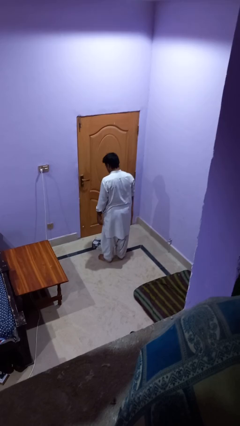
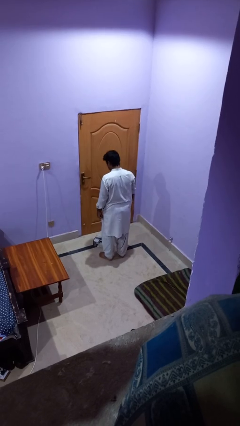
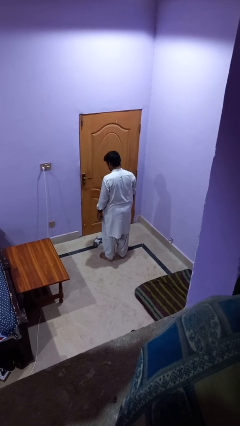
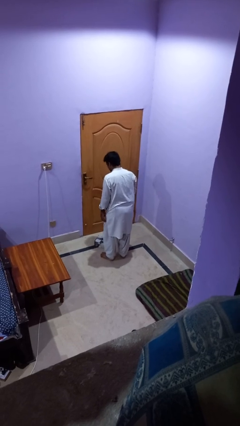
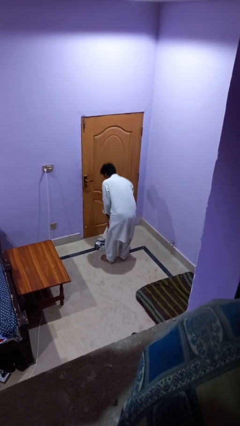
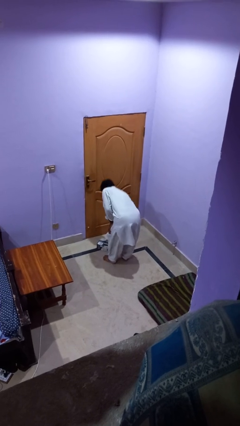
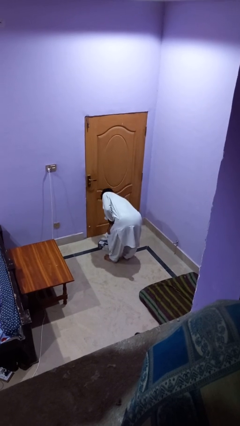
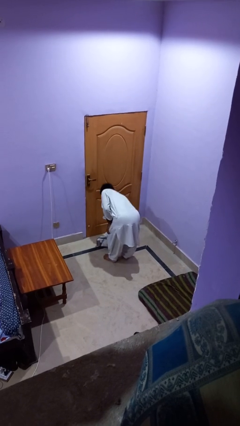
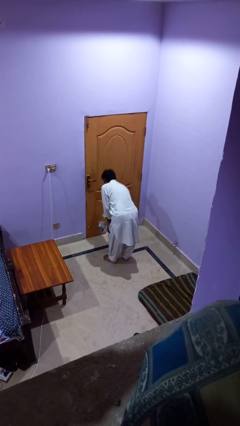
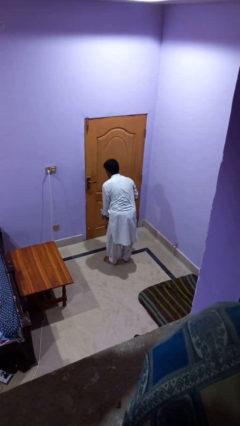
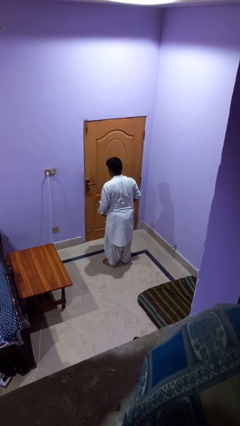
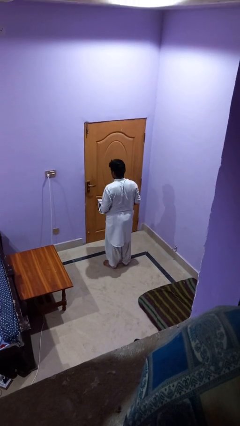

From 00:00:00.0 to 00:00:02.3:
person picks up object from floor

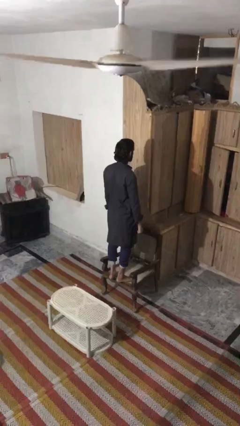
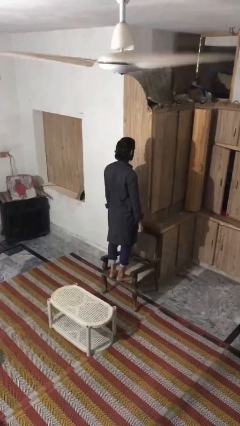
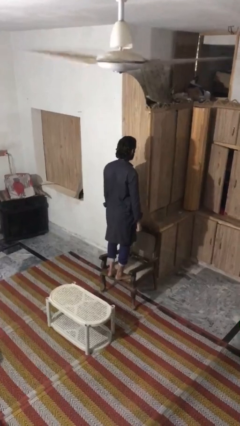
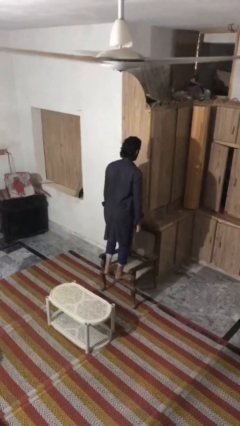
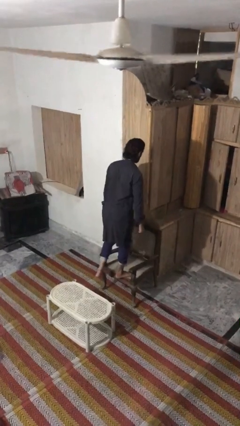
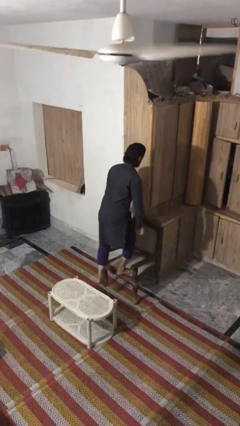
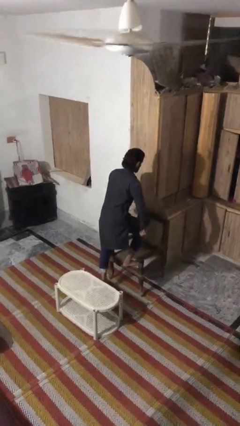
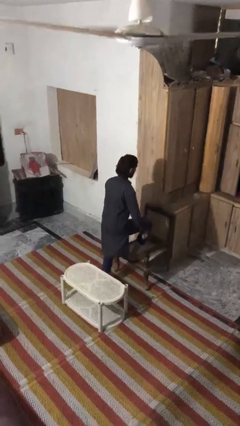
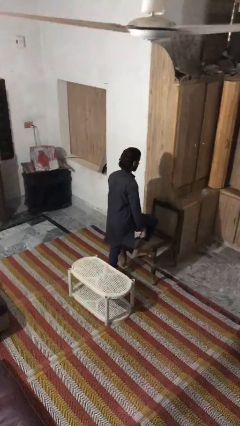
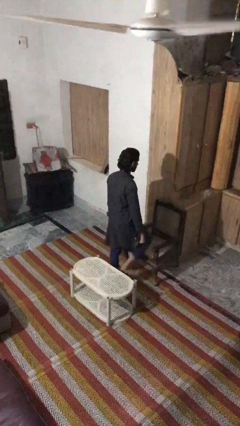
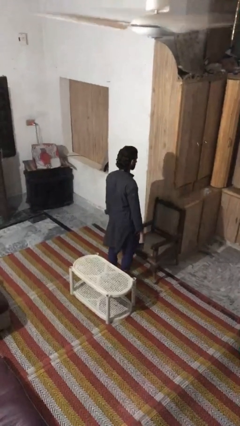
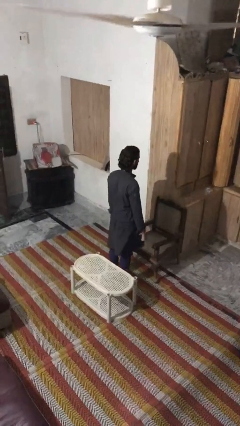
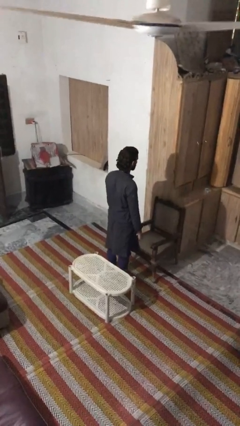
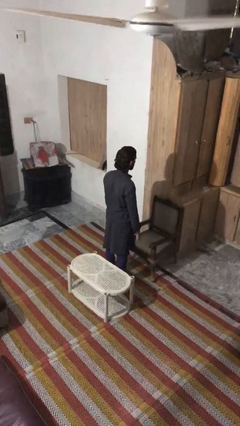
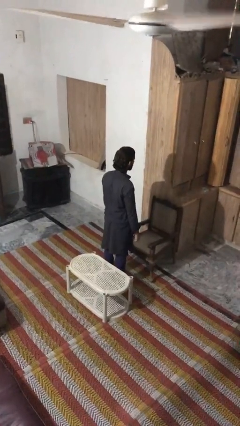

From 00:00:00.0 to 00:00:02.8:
person climbs off chair

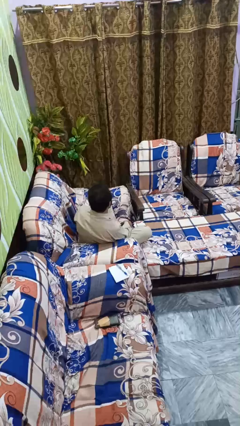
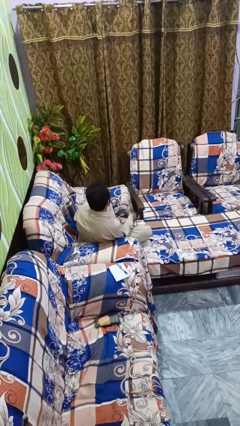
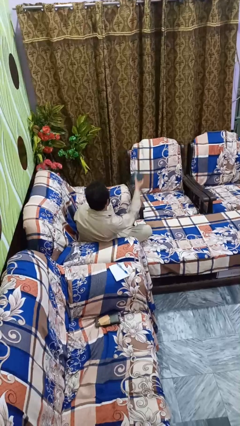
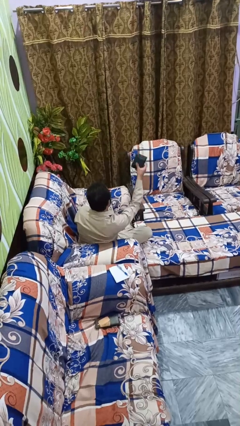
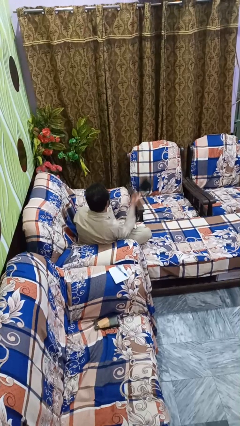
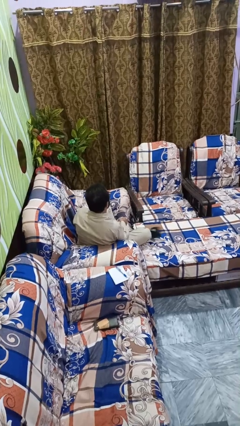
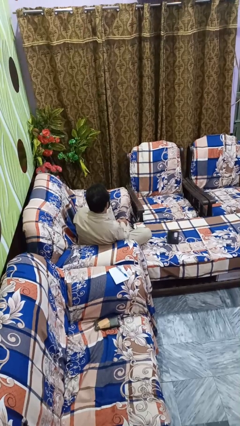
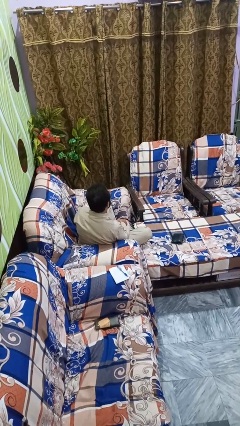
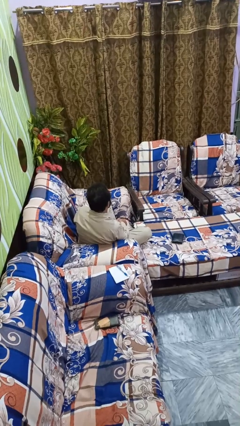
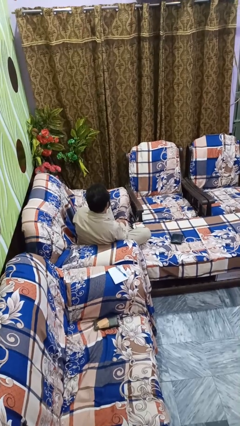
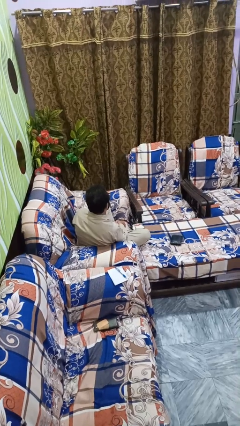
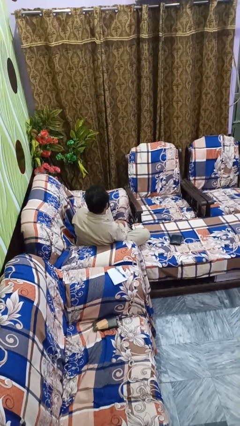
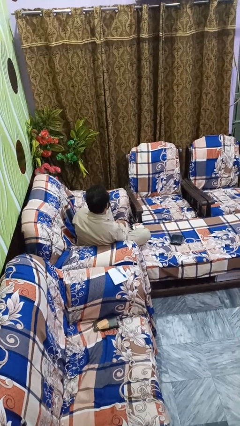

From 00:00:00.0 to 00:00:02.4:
person throws object into air

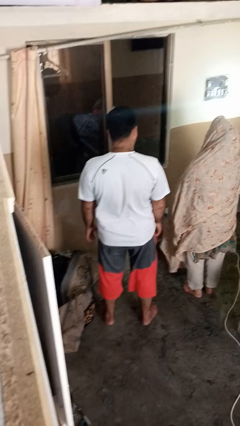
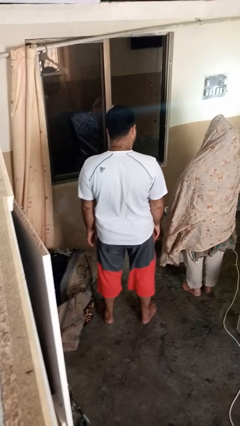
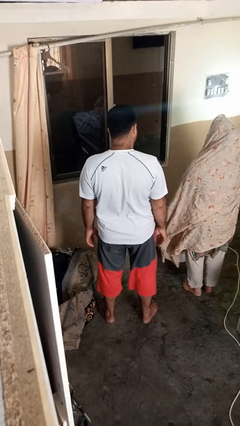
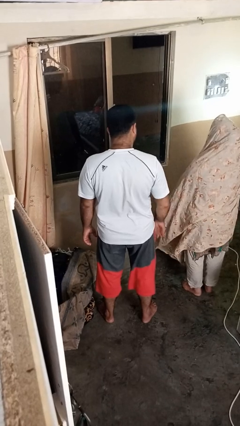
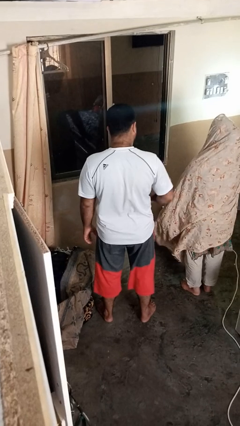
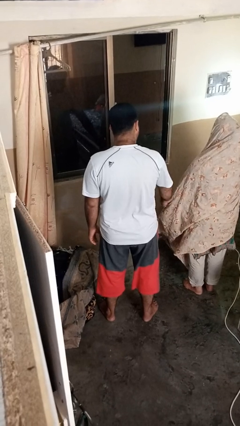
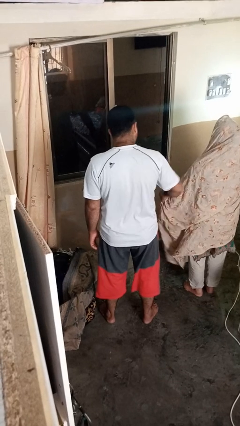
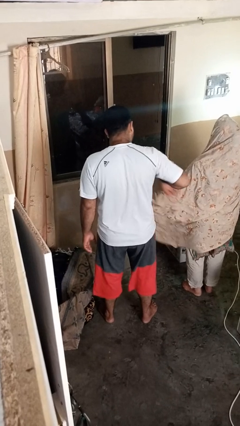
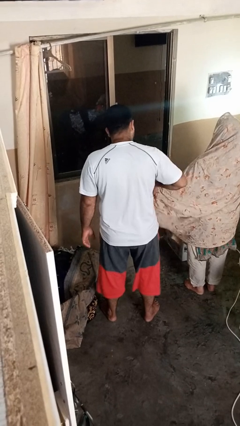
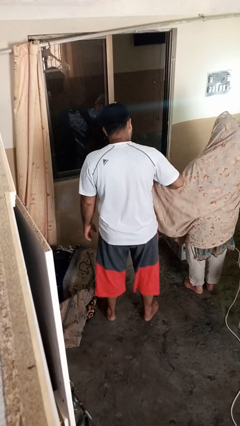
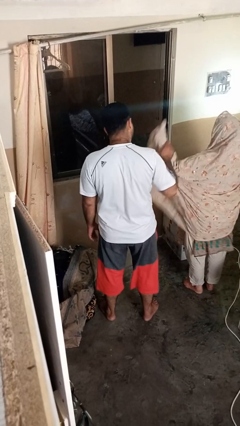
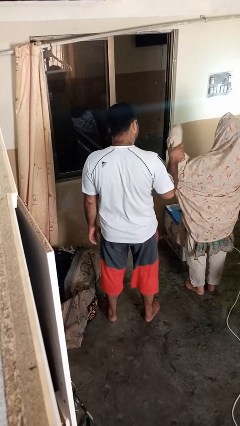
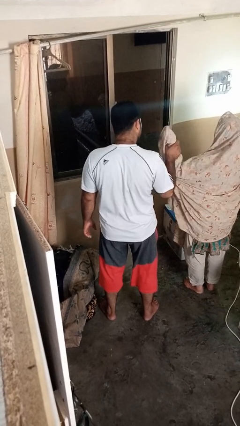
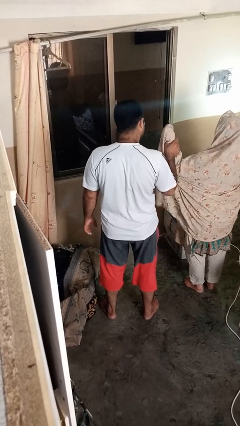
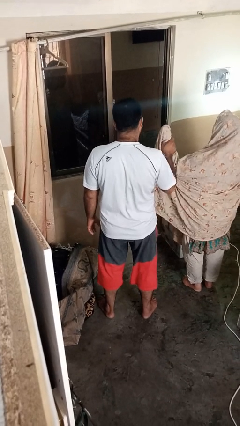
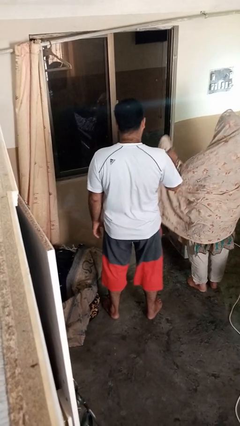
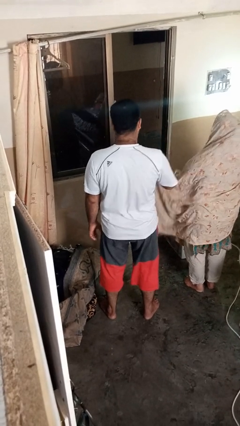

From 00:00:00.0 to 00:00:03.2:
person grabs person by forearm

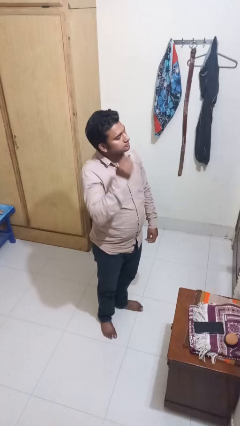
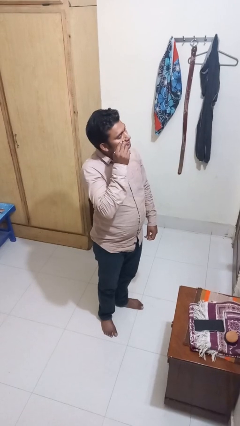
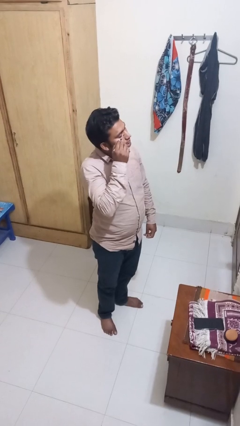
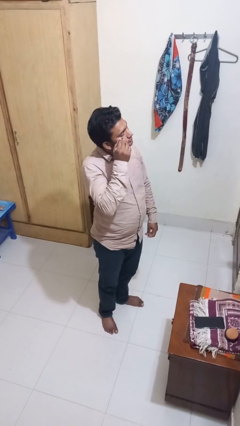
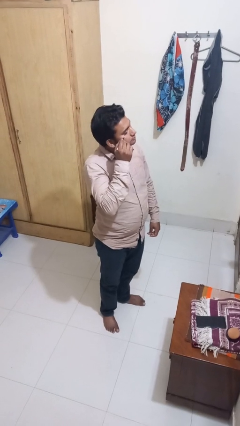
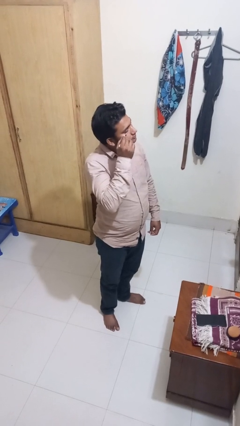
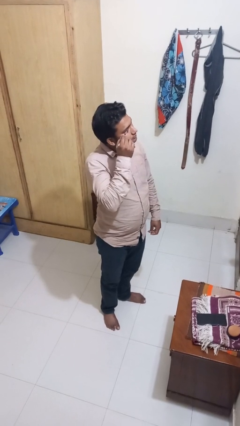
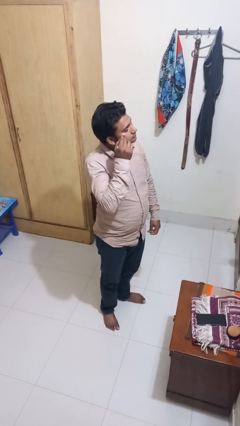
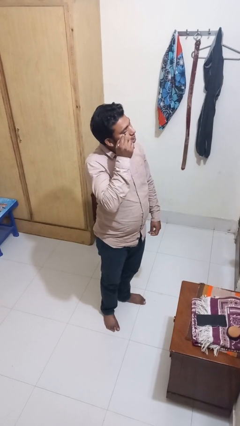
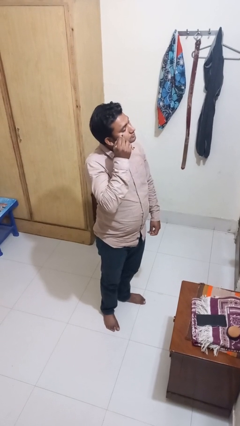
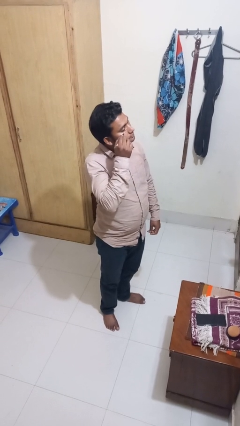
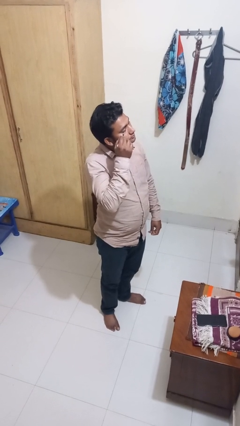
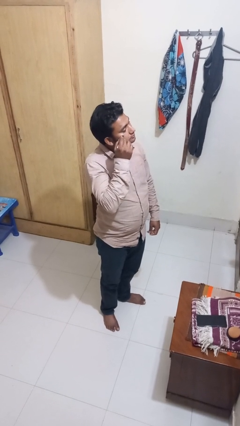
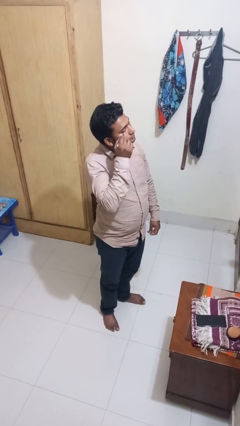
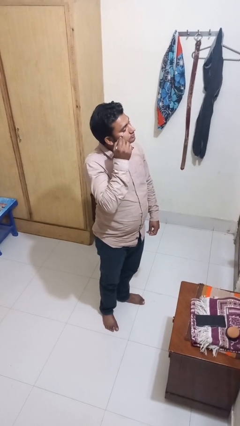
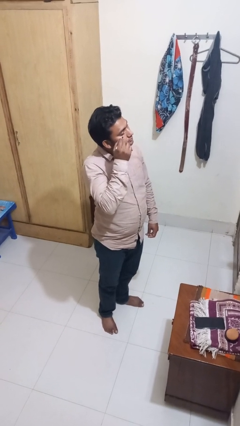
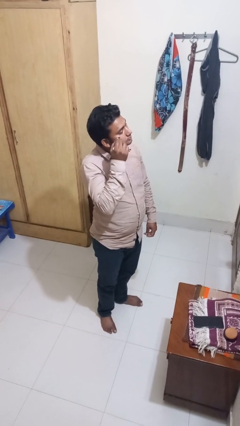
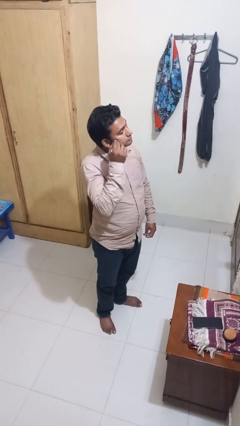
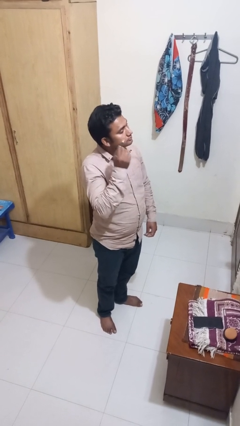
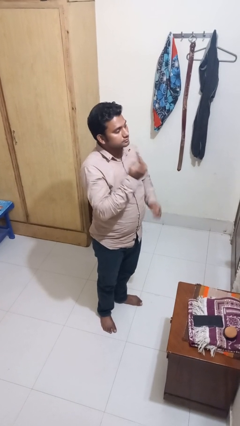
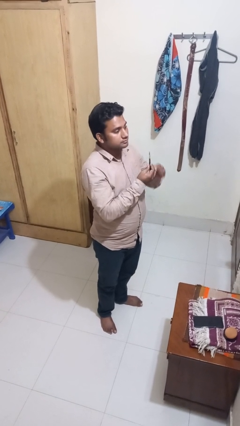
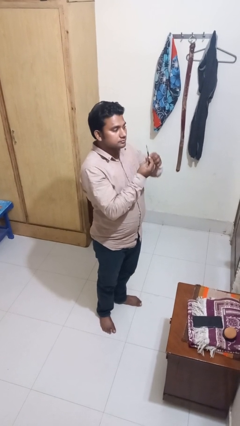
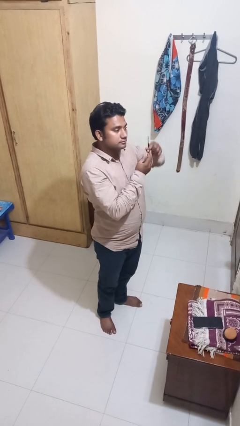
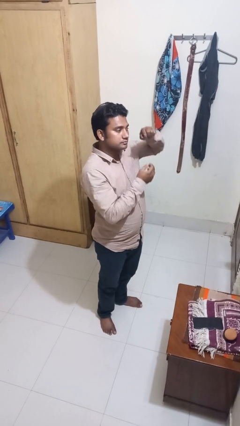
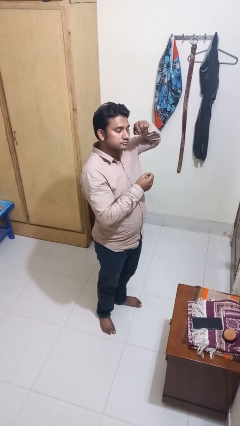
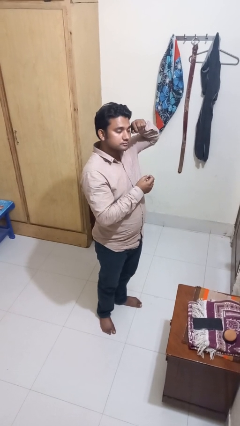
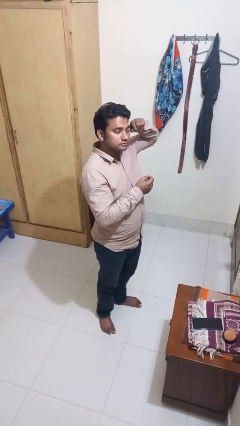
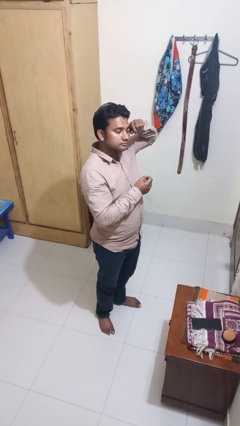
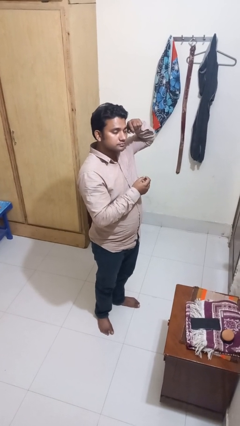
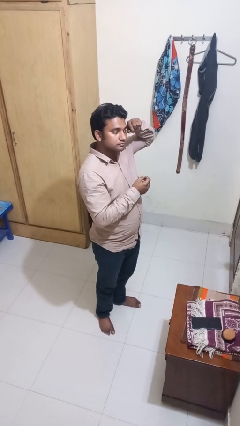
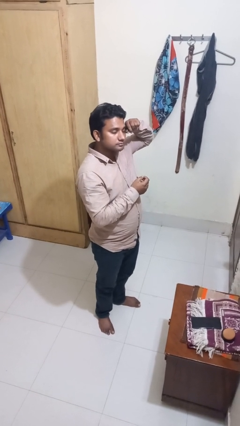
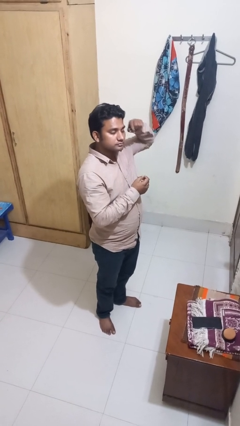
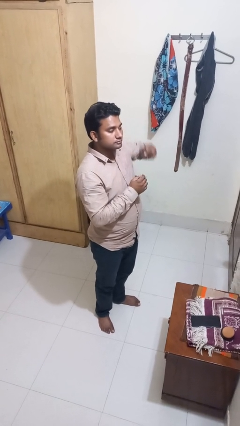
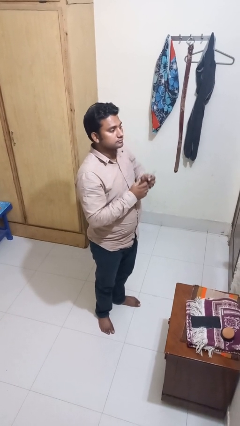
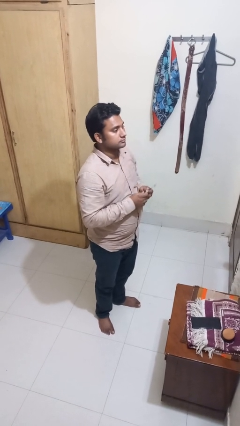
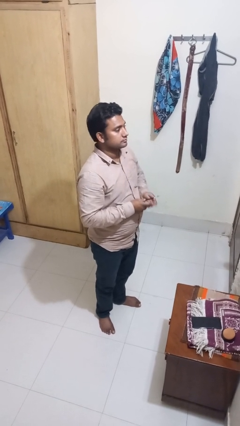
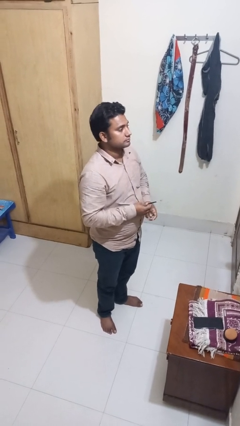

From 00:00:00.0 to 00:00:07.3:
person applies eye makeup
